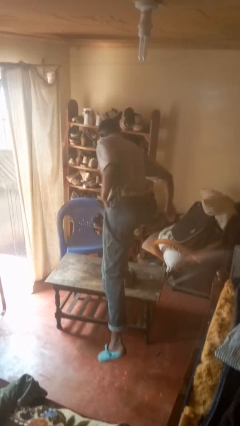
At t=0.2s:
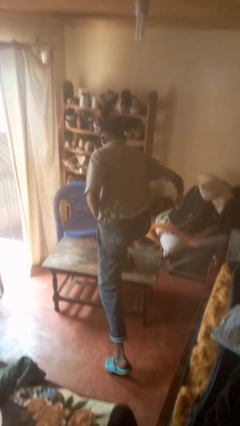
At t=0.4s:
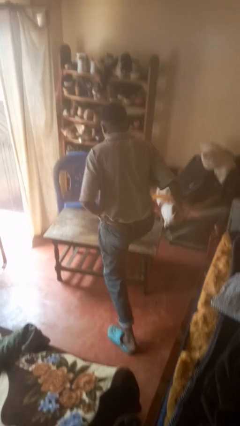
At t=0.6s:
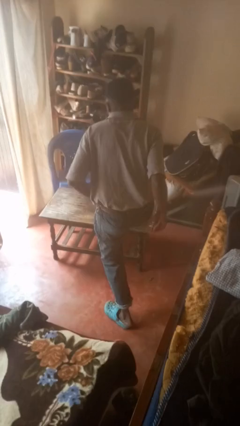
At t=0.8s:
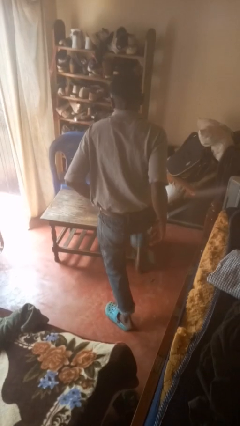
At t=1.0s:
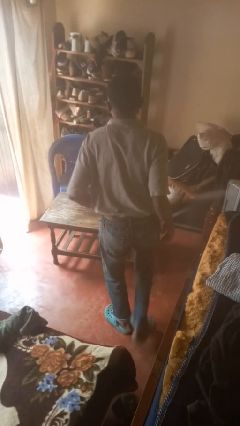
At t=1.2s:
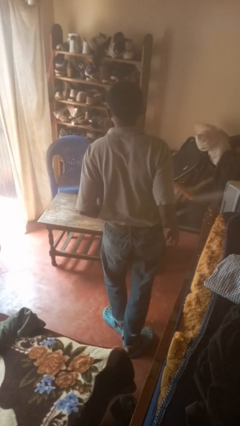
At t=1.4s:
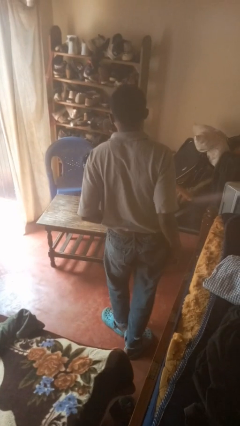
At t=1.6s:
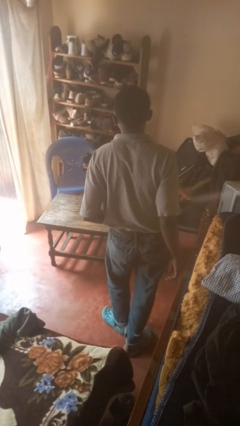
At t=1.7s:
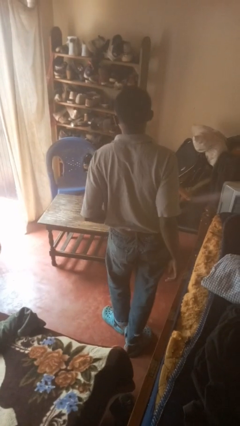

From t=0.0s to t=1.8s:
person climbs off table

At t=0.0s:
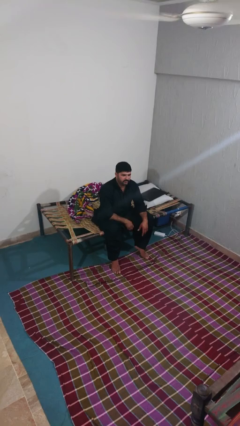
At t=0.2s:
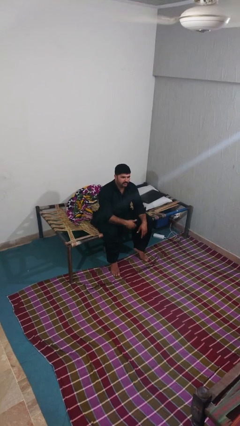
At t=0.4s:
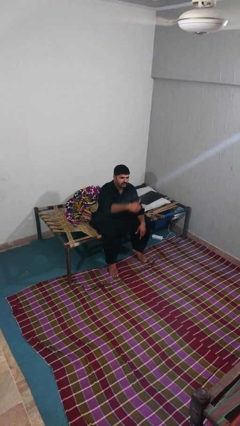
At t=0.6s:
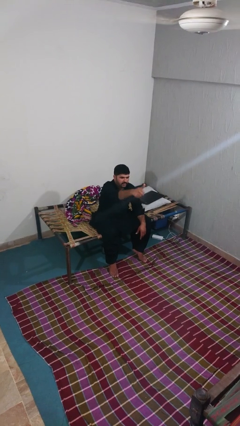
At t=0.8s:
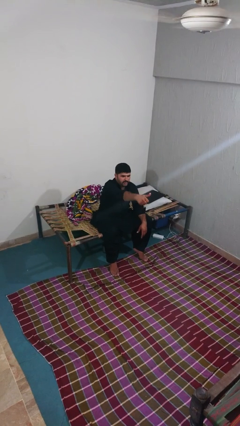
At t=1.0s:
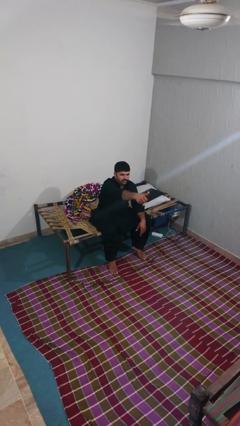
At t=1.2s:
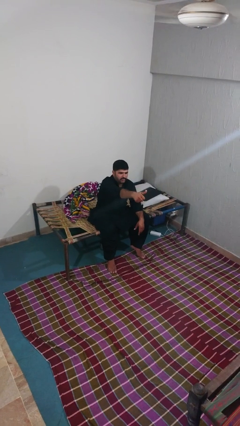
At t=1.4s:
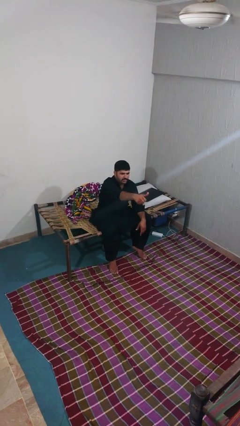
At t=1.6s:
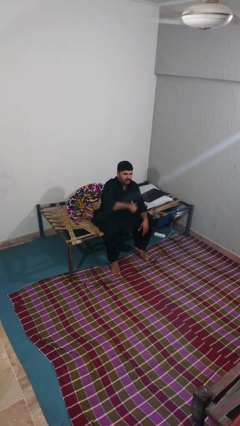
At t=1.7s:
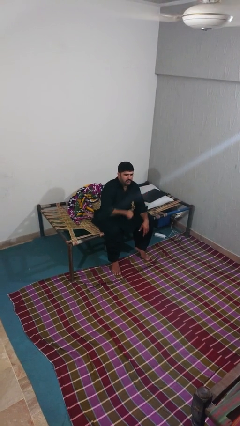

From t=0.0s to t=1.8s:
person gestures thumbs up

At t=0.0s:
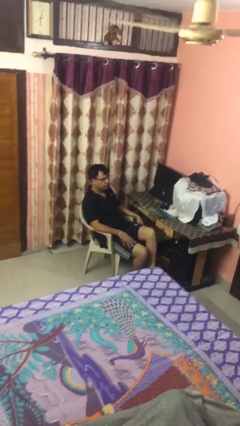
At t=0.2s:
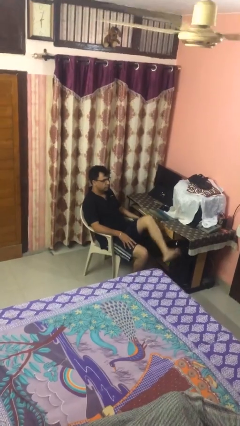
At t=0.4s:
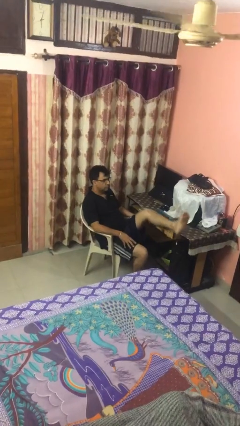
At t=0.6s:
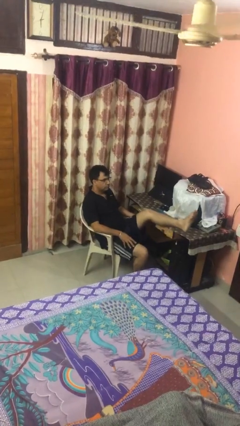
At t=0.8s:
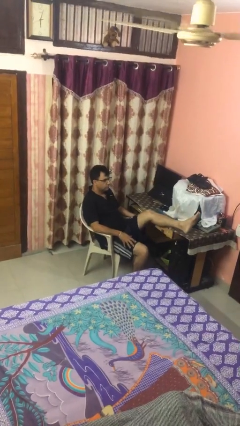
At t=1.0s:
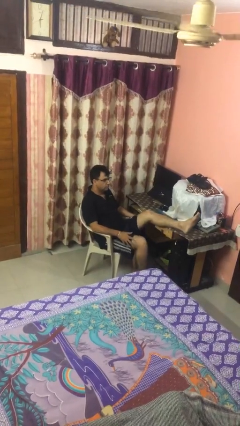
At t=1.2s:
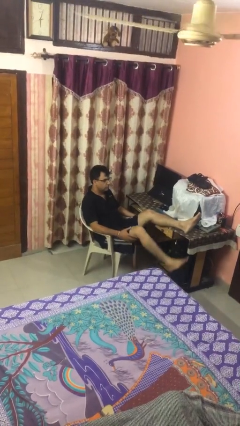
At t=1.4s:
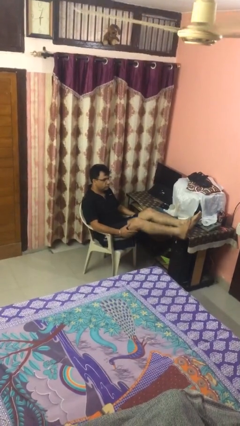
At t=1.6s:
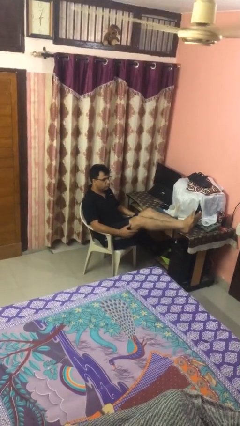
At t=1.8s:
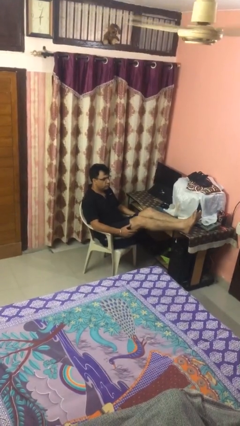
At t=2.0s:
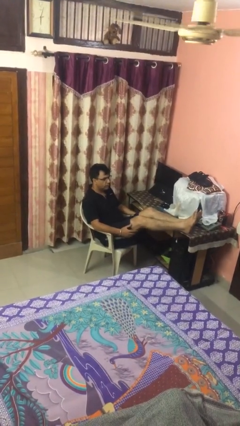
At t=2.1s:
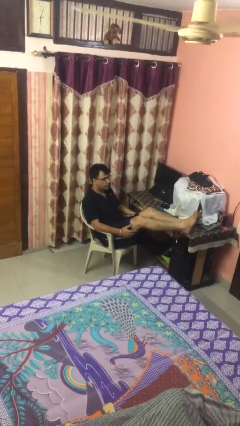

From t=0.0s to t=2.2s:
person puts feet up

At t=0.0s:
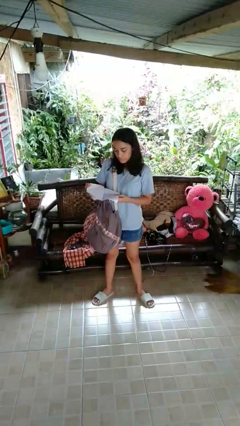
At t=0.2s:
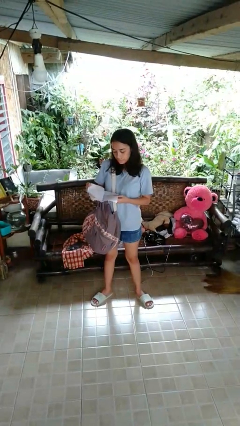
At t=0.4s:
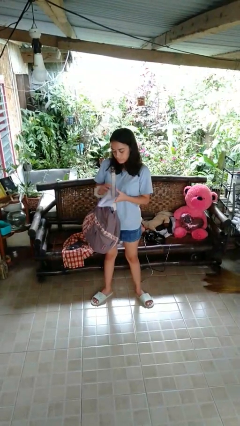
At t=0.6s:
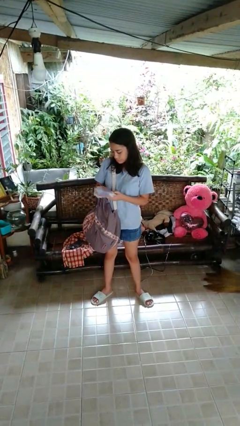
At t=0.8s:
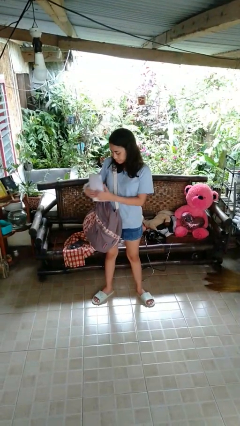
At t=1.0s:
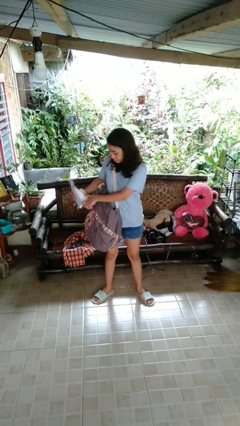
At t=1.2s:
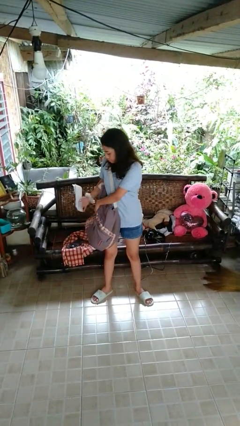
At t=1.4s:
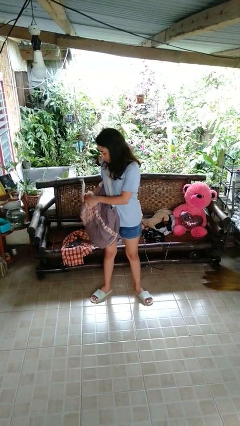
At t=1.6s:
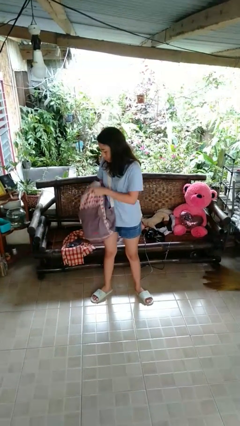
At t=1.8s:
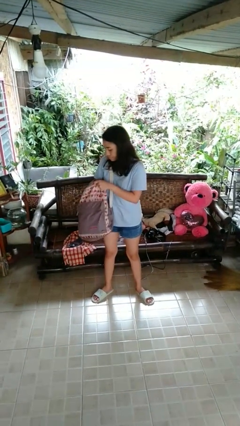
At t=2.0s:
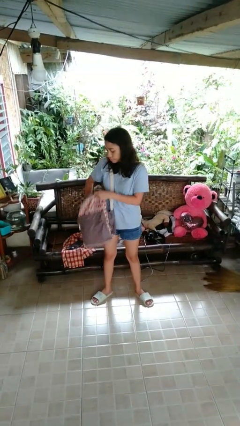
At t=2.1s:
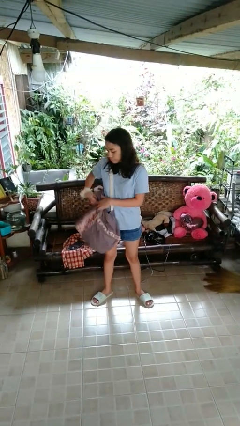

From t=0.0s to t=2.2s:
person puts object into backpack

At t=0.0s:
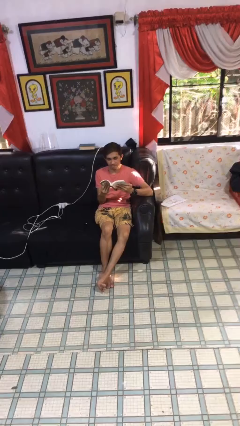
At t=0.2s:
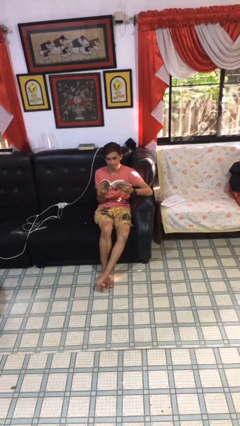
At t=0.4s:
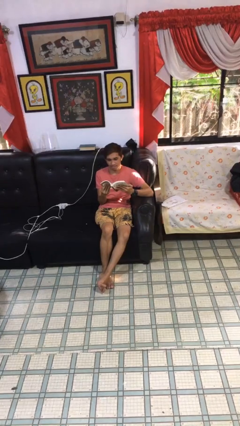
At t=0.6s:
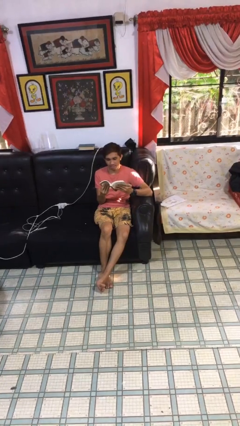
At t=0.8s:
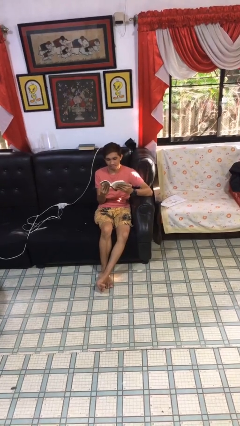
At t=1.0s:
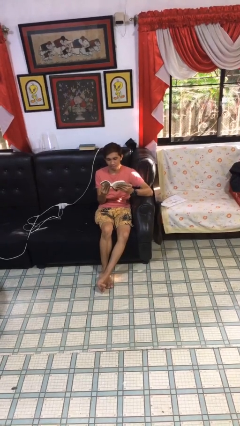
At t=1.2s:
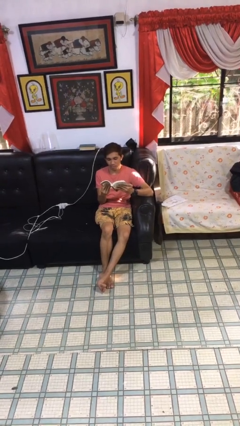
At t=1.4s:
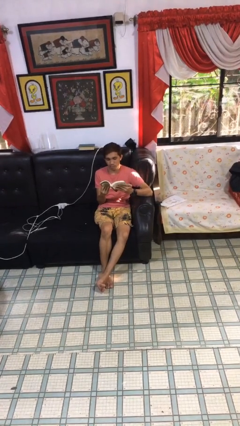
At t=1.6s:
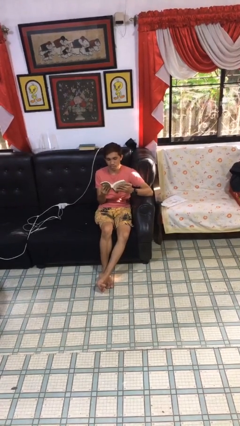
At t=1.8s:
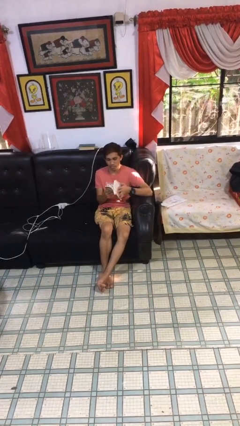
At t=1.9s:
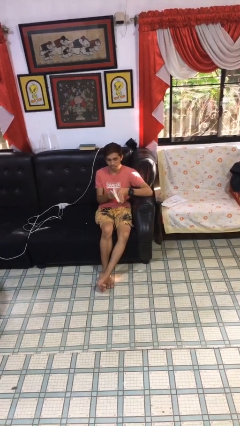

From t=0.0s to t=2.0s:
person reads document

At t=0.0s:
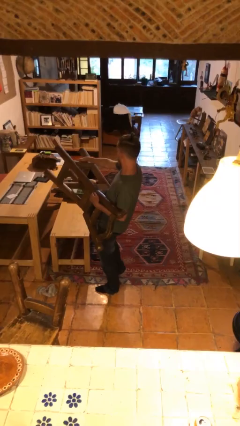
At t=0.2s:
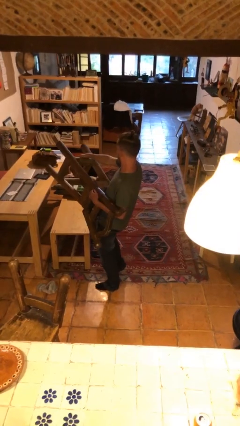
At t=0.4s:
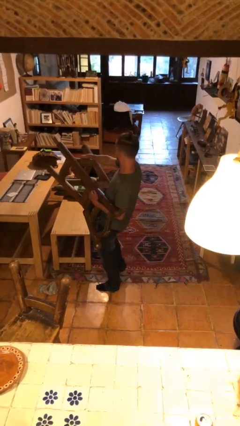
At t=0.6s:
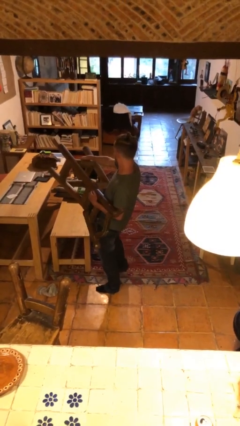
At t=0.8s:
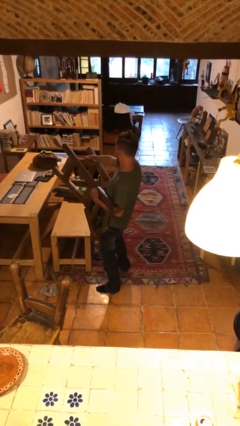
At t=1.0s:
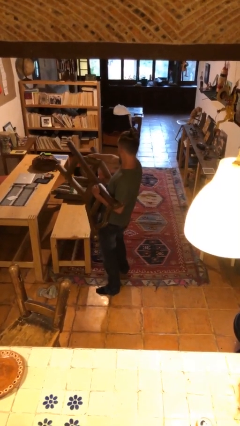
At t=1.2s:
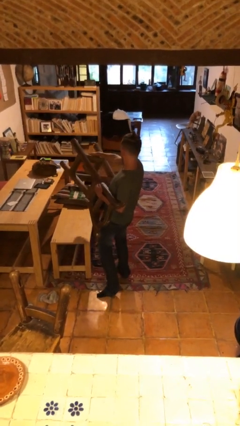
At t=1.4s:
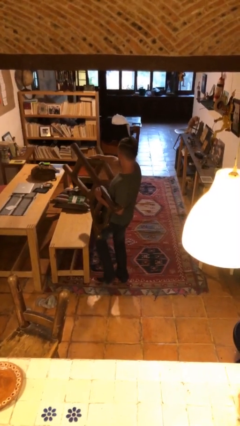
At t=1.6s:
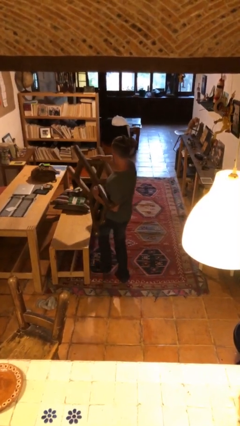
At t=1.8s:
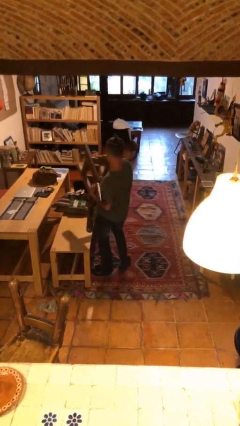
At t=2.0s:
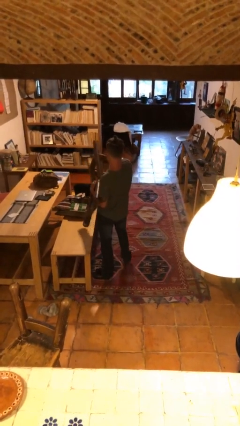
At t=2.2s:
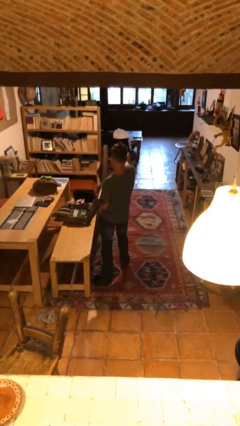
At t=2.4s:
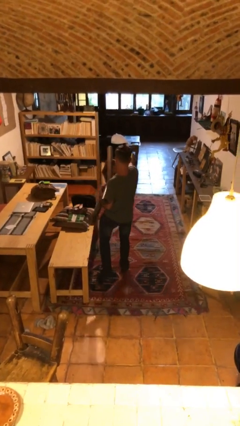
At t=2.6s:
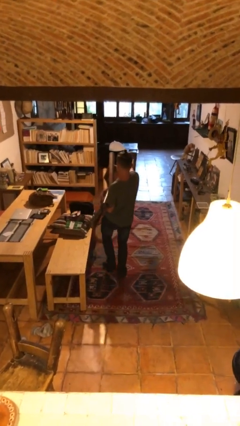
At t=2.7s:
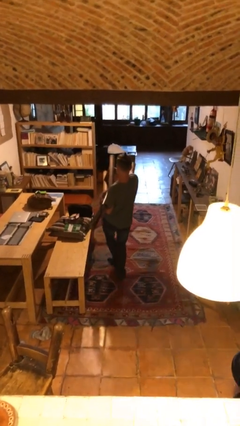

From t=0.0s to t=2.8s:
person carries heavy object

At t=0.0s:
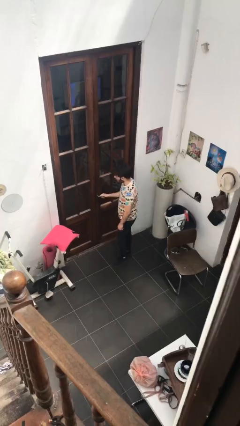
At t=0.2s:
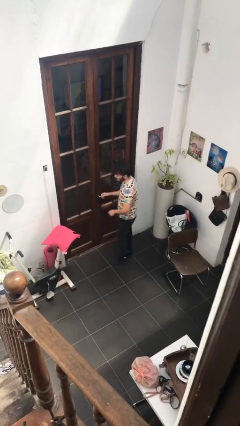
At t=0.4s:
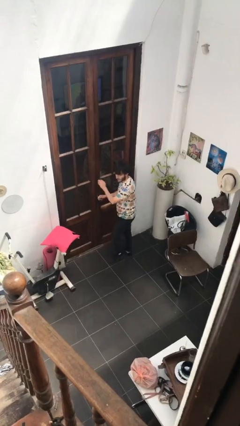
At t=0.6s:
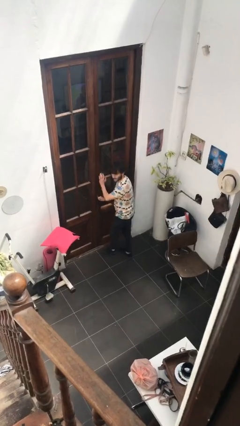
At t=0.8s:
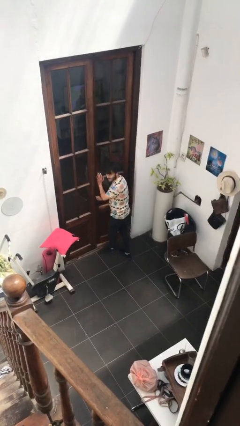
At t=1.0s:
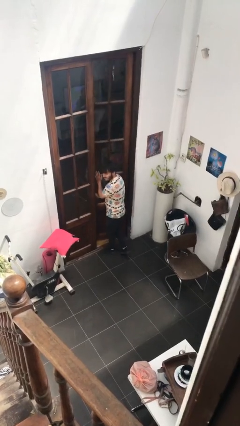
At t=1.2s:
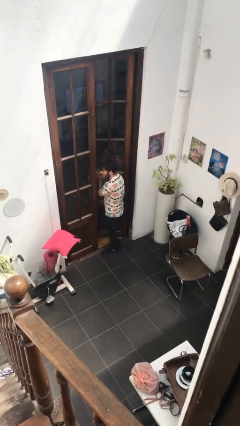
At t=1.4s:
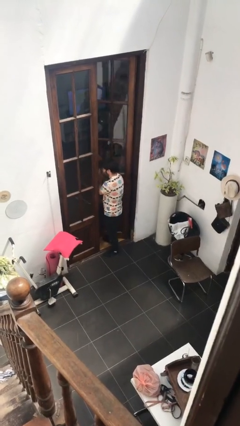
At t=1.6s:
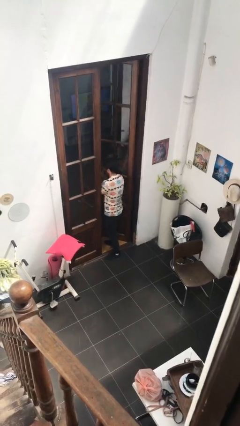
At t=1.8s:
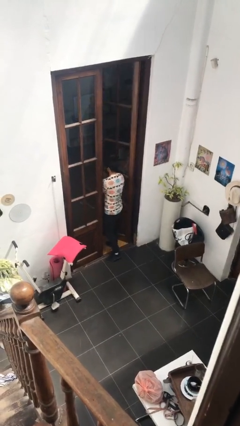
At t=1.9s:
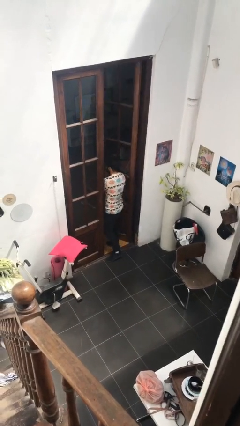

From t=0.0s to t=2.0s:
person opens facility door

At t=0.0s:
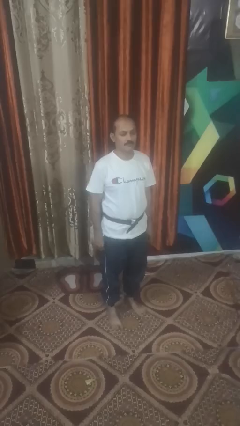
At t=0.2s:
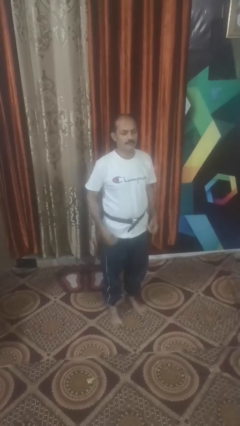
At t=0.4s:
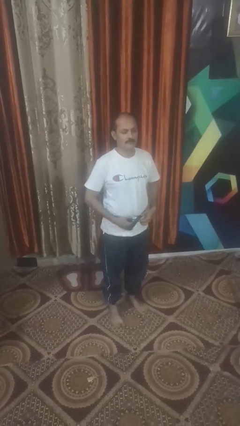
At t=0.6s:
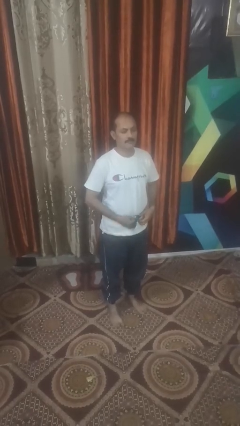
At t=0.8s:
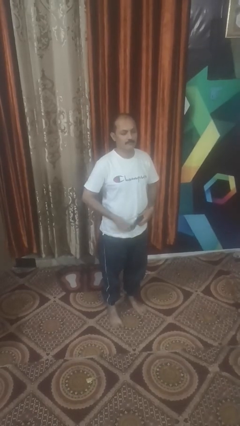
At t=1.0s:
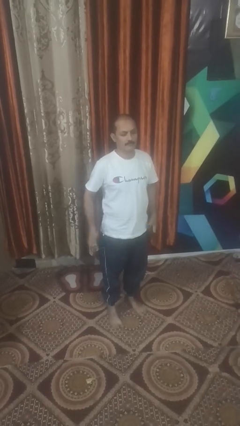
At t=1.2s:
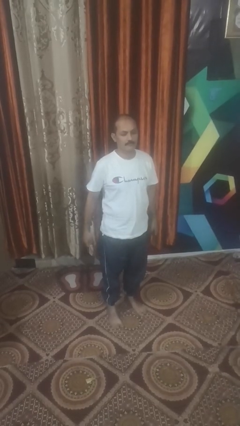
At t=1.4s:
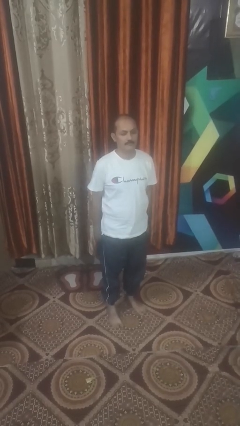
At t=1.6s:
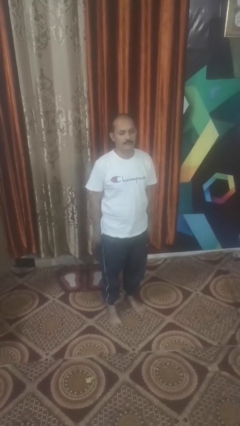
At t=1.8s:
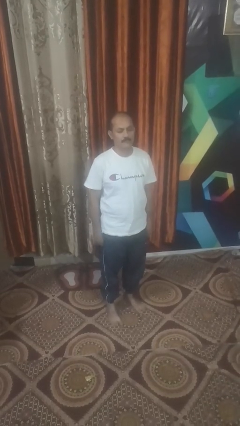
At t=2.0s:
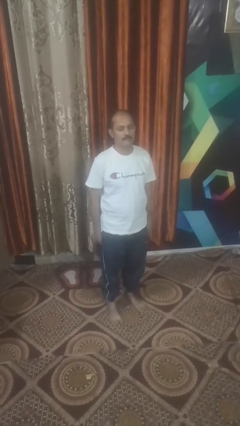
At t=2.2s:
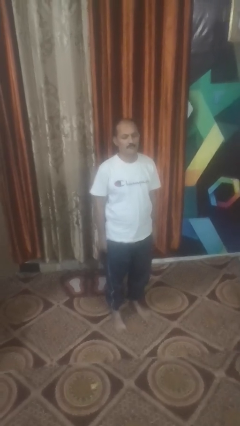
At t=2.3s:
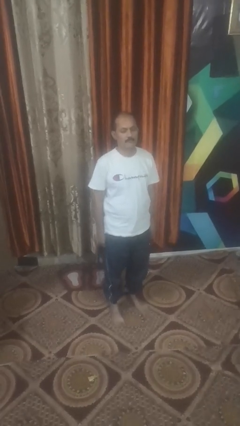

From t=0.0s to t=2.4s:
person takes off belt
